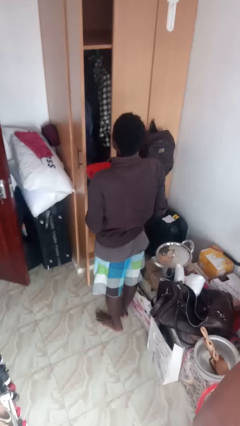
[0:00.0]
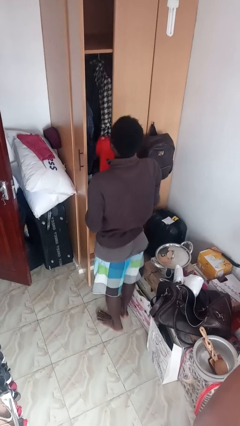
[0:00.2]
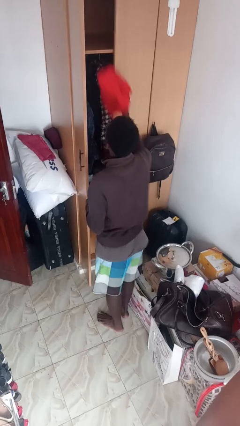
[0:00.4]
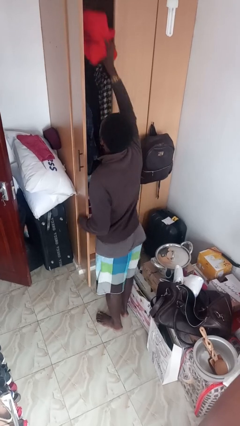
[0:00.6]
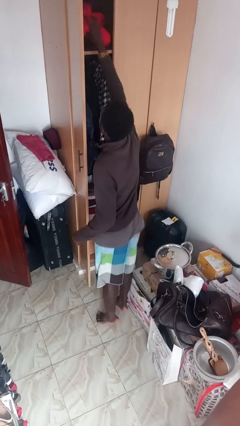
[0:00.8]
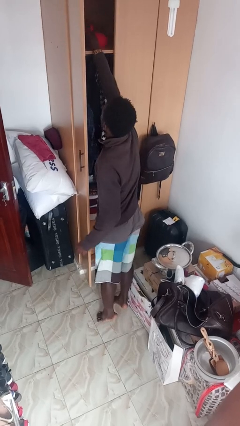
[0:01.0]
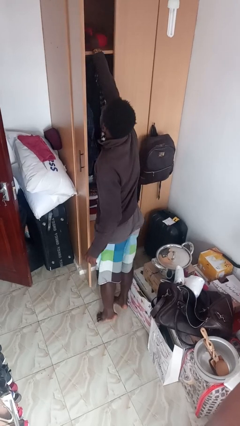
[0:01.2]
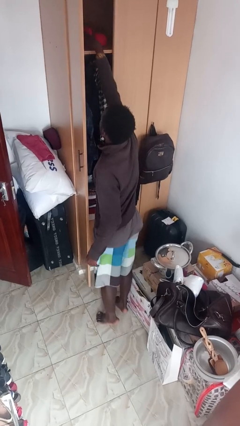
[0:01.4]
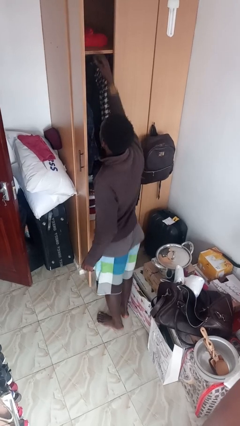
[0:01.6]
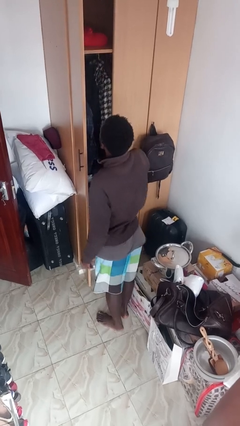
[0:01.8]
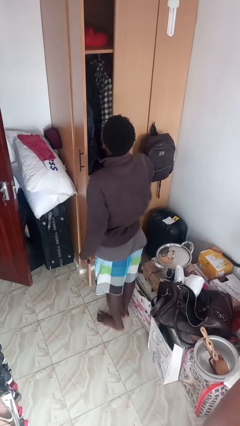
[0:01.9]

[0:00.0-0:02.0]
person puts down object on shelf

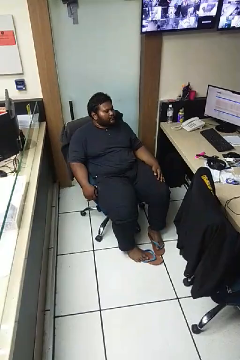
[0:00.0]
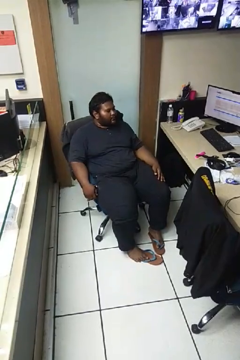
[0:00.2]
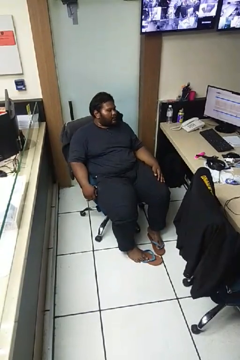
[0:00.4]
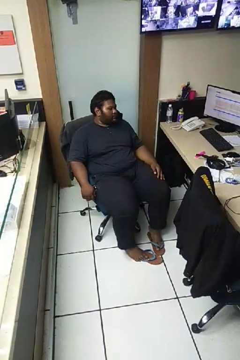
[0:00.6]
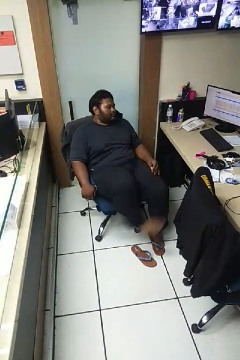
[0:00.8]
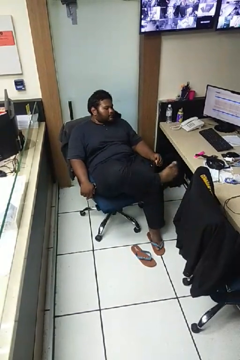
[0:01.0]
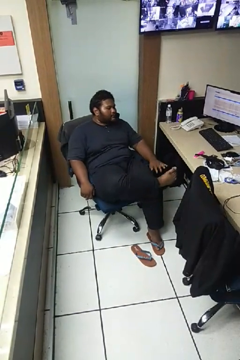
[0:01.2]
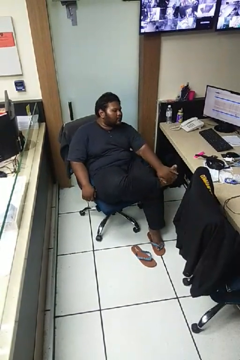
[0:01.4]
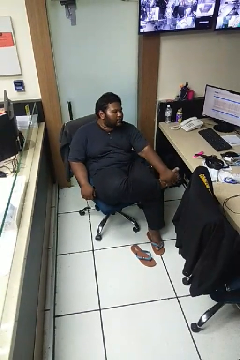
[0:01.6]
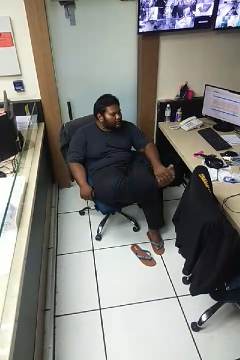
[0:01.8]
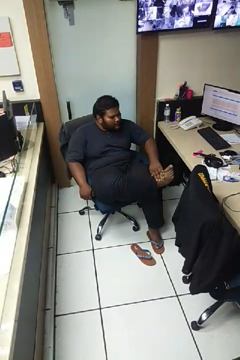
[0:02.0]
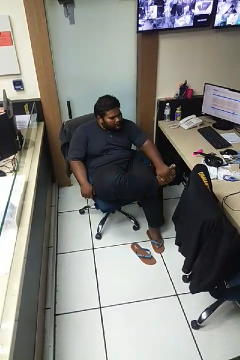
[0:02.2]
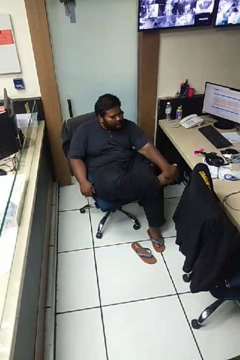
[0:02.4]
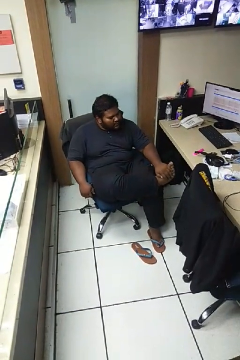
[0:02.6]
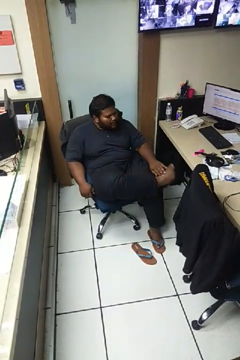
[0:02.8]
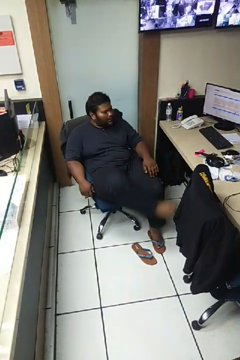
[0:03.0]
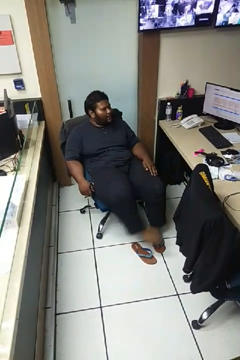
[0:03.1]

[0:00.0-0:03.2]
person rubs foot

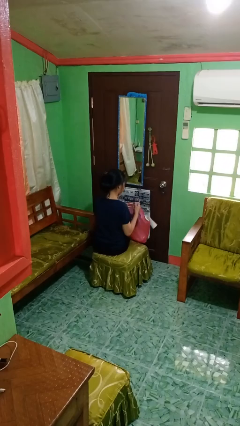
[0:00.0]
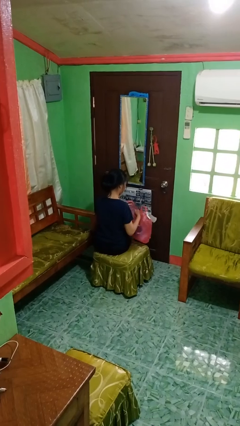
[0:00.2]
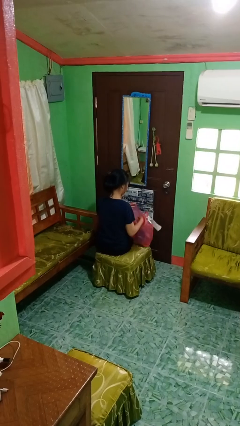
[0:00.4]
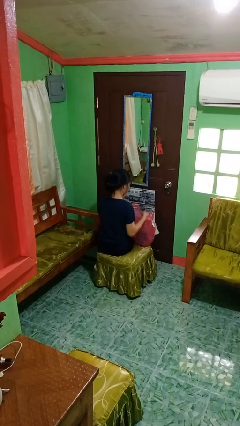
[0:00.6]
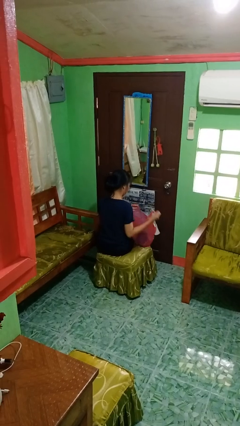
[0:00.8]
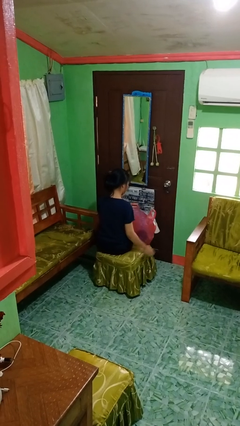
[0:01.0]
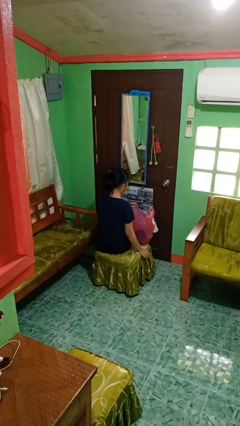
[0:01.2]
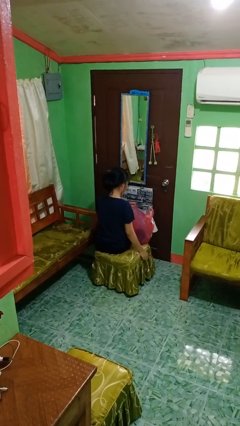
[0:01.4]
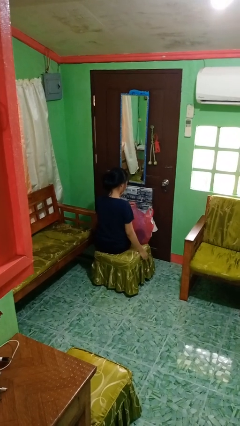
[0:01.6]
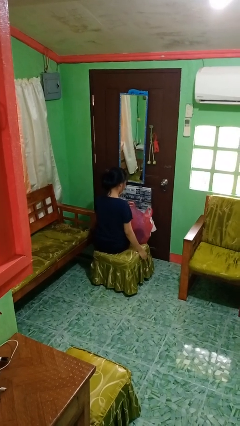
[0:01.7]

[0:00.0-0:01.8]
person puts object into bag

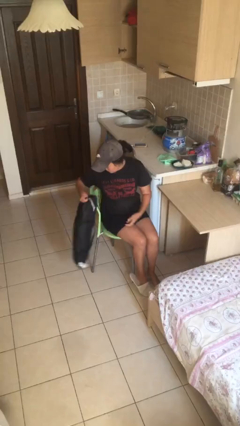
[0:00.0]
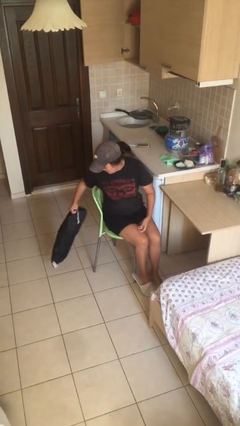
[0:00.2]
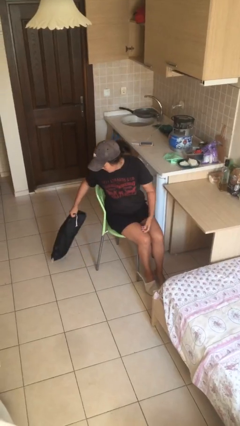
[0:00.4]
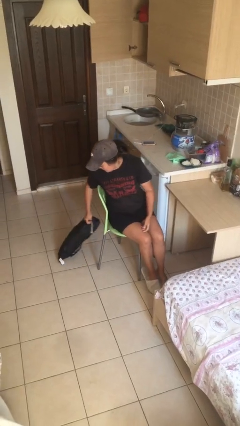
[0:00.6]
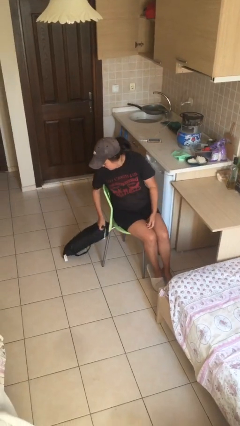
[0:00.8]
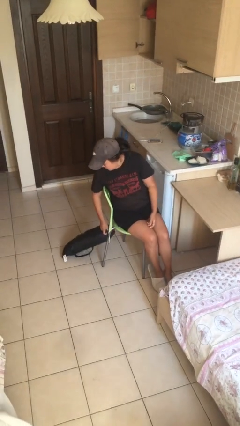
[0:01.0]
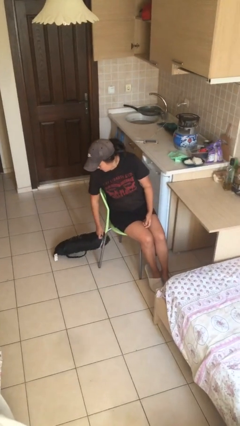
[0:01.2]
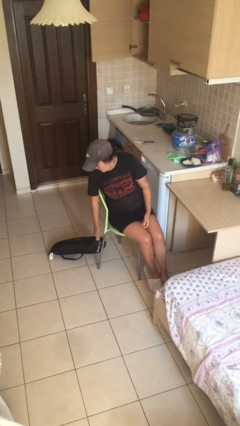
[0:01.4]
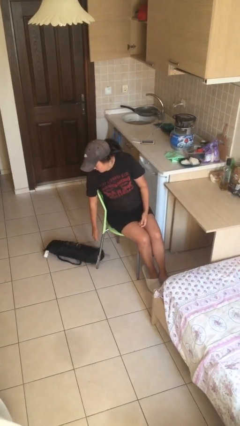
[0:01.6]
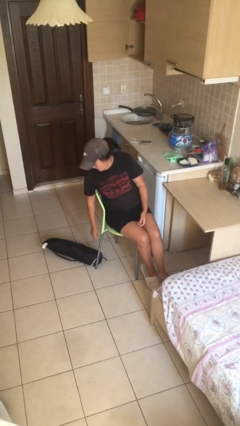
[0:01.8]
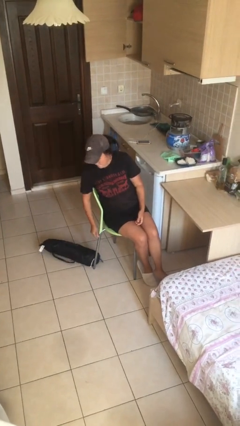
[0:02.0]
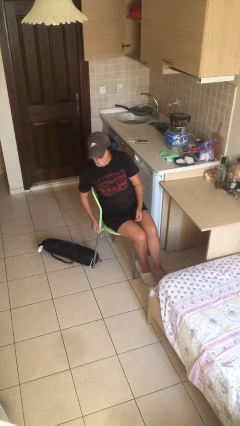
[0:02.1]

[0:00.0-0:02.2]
person puts down object on floor

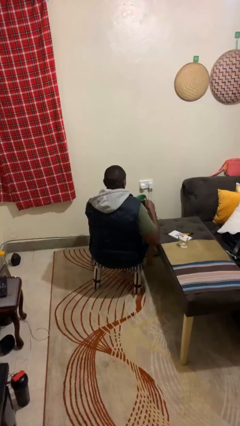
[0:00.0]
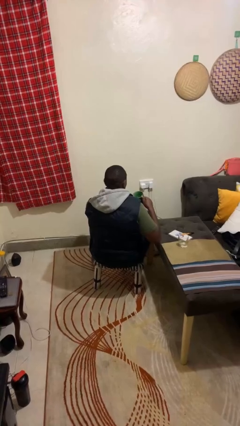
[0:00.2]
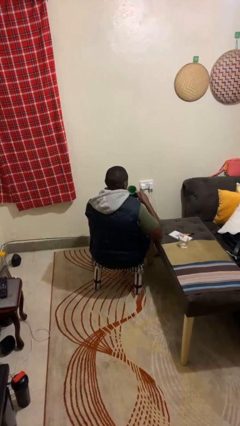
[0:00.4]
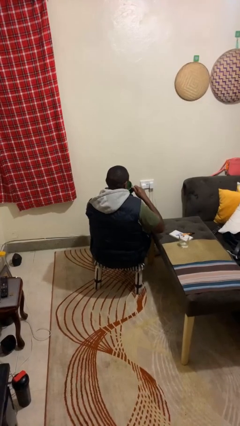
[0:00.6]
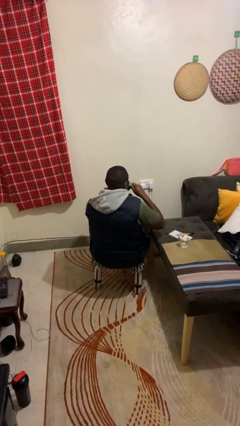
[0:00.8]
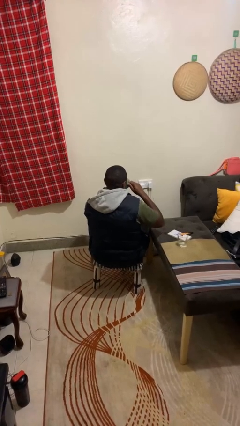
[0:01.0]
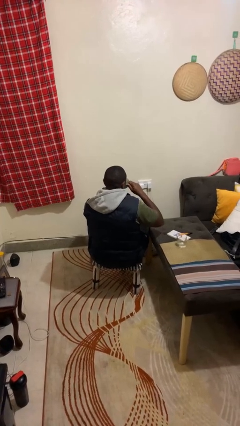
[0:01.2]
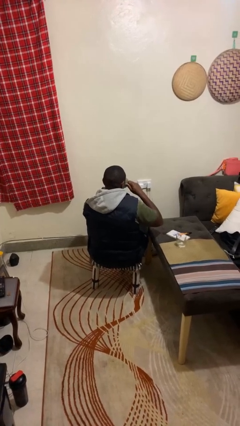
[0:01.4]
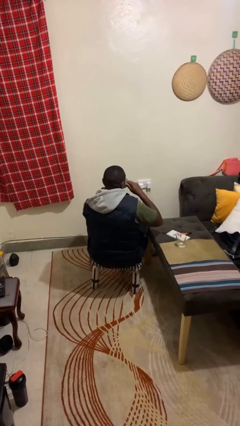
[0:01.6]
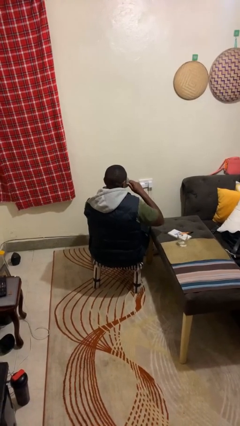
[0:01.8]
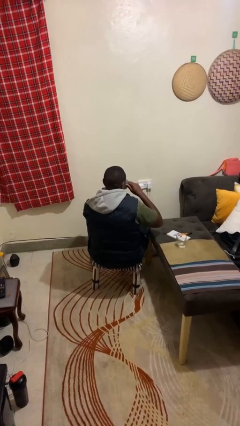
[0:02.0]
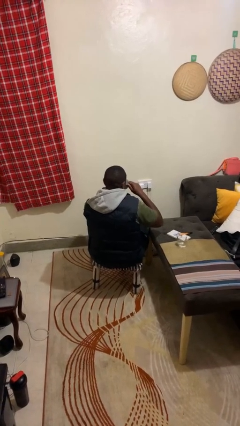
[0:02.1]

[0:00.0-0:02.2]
person drinks from mug

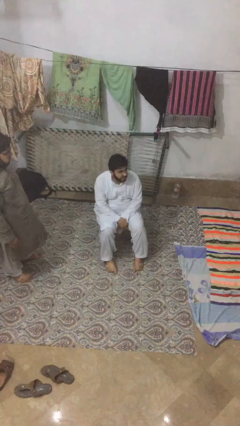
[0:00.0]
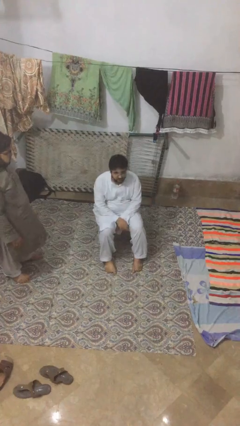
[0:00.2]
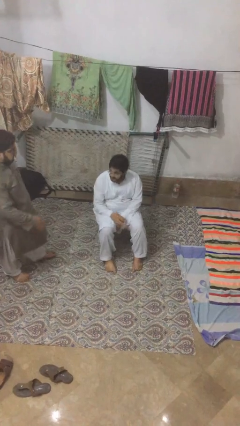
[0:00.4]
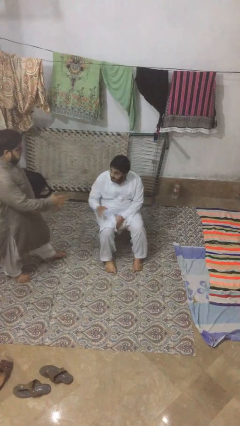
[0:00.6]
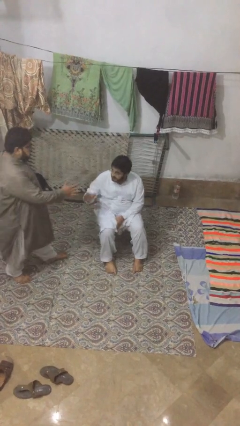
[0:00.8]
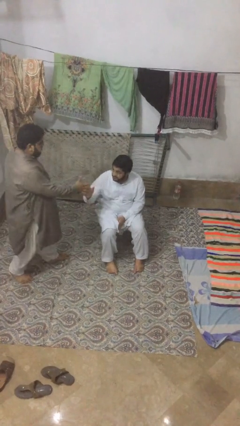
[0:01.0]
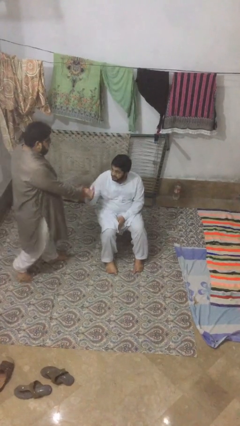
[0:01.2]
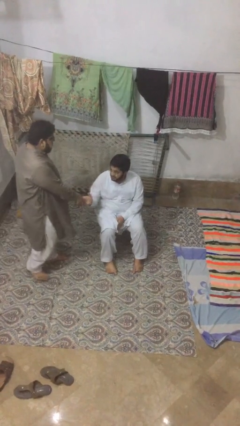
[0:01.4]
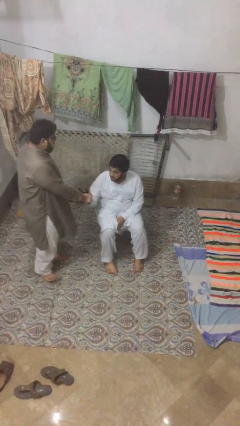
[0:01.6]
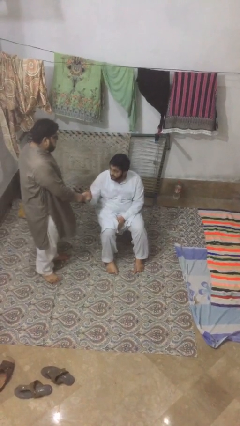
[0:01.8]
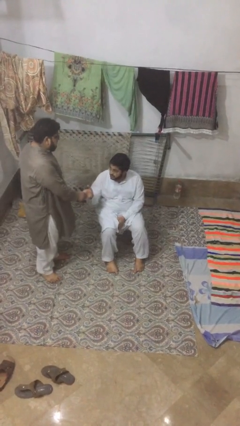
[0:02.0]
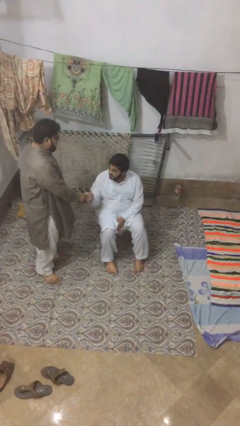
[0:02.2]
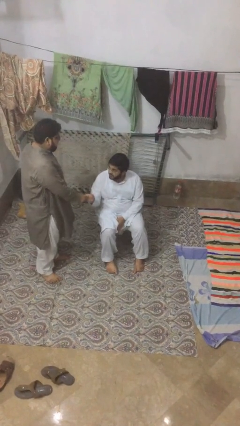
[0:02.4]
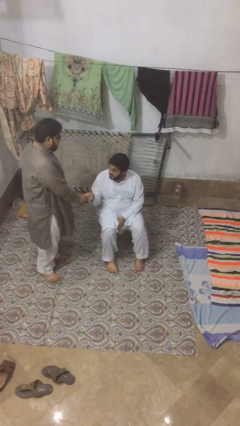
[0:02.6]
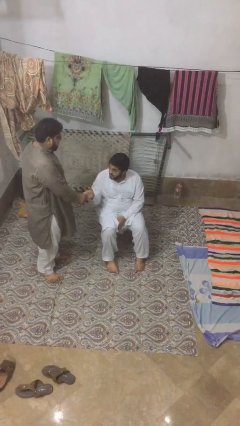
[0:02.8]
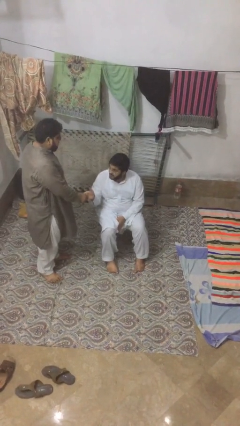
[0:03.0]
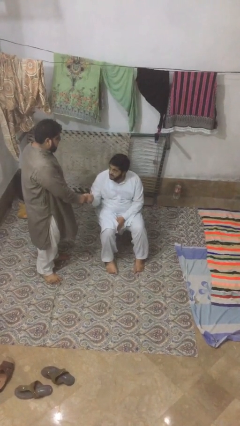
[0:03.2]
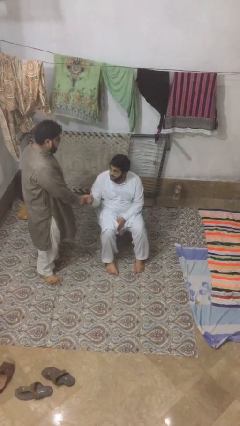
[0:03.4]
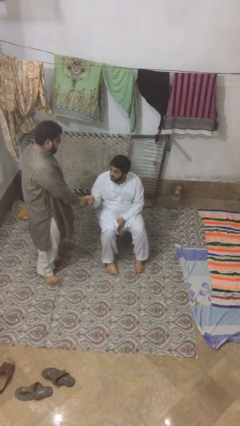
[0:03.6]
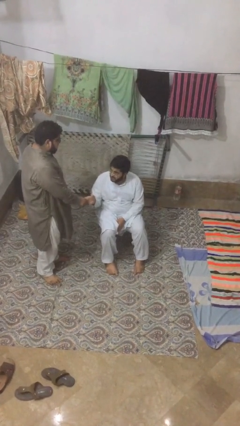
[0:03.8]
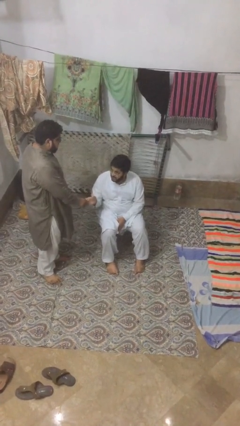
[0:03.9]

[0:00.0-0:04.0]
person shakes hand

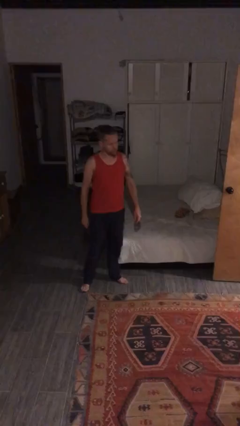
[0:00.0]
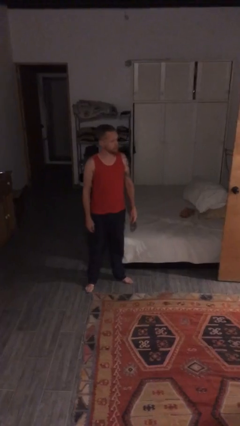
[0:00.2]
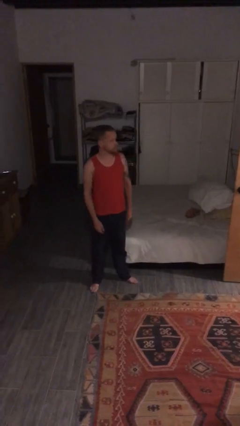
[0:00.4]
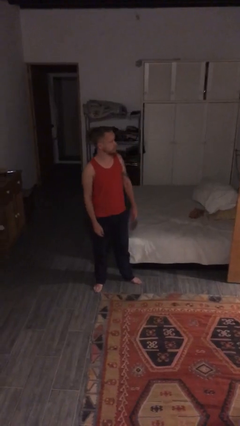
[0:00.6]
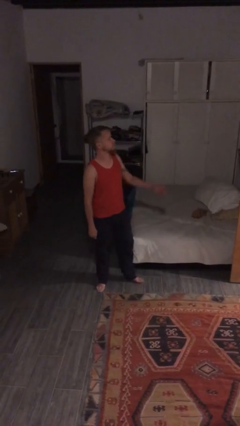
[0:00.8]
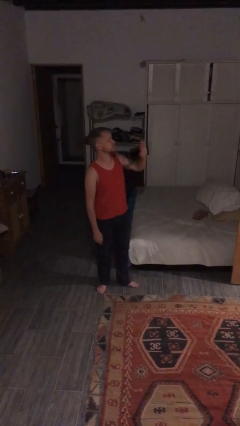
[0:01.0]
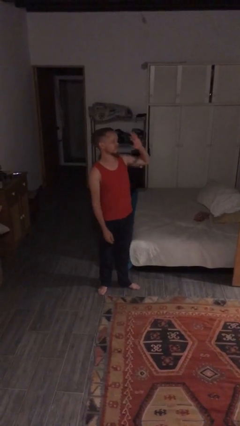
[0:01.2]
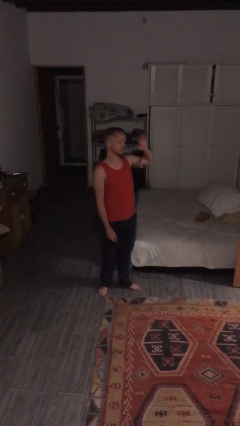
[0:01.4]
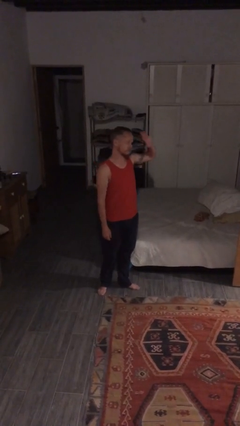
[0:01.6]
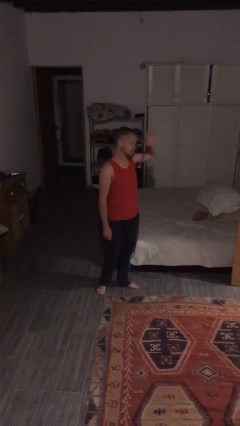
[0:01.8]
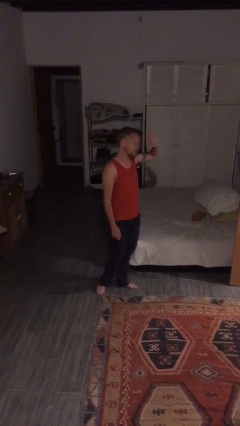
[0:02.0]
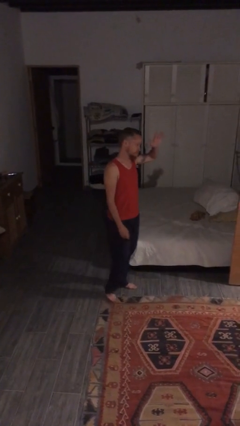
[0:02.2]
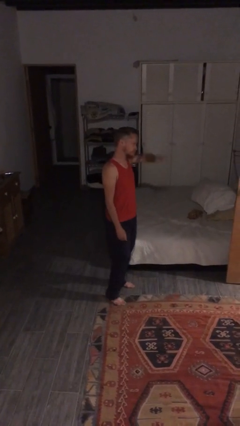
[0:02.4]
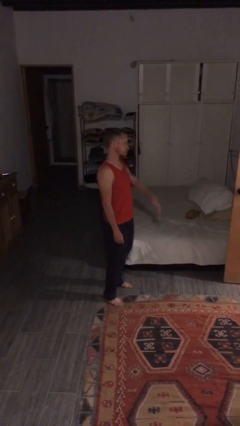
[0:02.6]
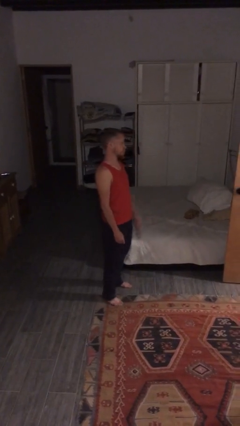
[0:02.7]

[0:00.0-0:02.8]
person waves at person
